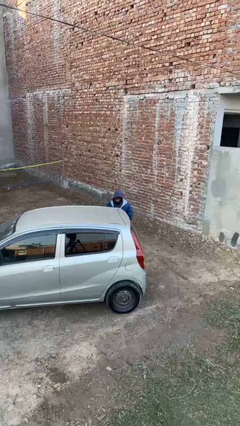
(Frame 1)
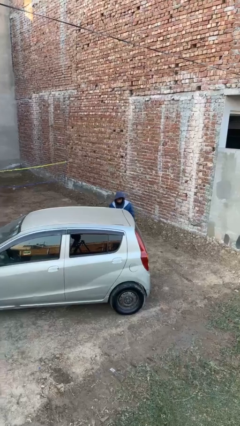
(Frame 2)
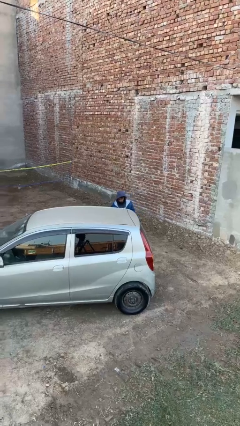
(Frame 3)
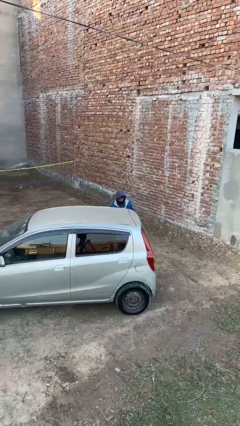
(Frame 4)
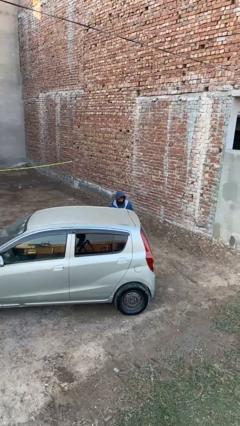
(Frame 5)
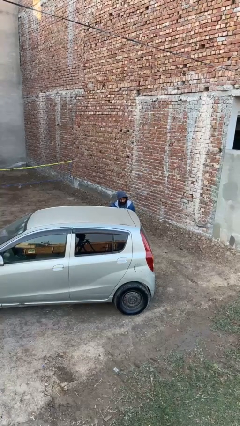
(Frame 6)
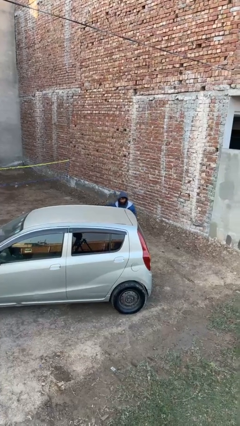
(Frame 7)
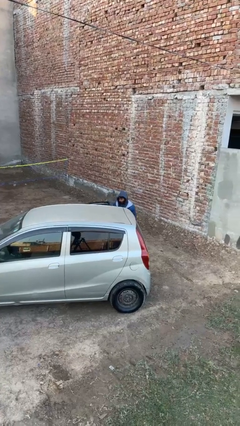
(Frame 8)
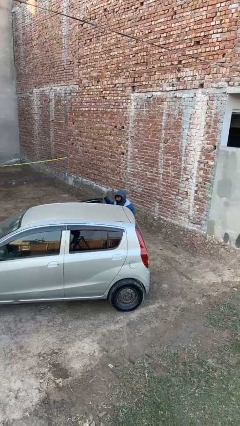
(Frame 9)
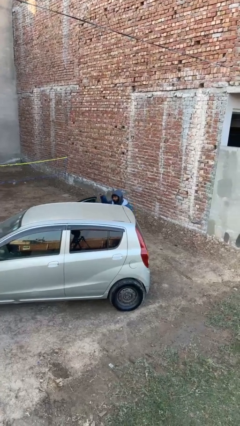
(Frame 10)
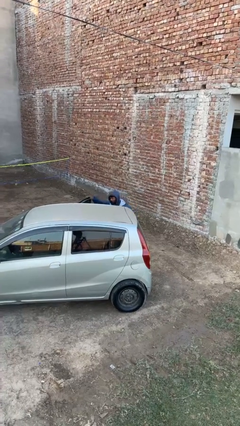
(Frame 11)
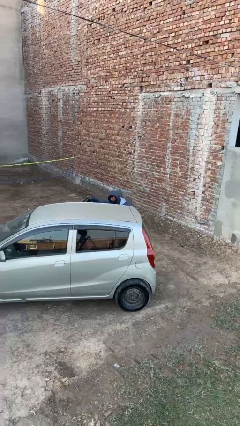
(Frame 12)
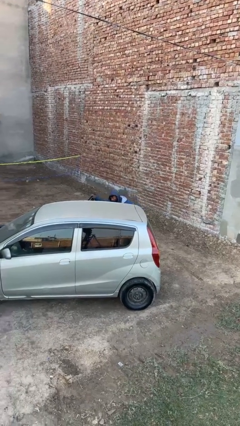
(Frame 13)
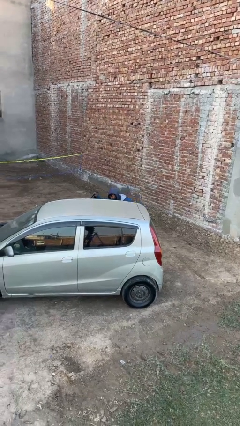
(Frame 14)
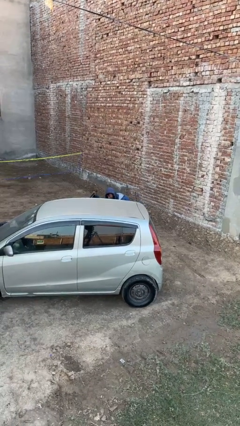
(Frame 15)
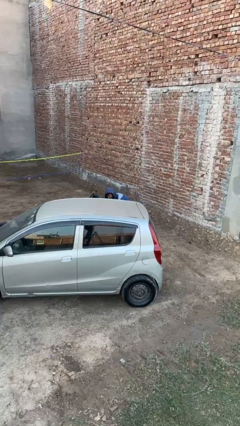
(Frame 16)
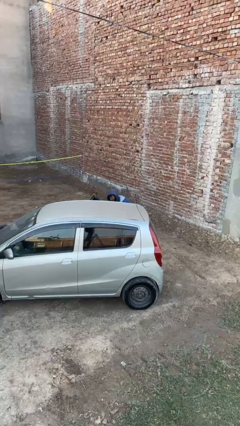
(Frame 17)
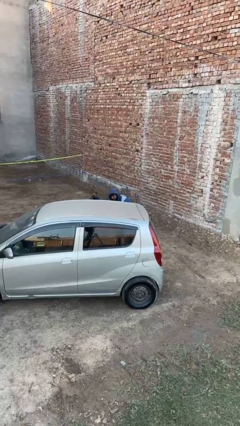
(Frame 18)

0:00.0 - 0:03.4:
person opens car door

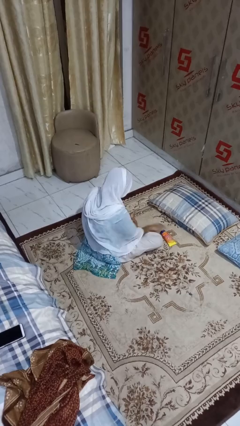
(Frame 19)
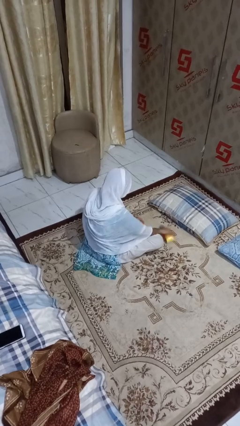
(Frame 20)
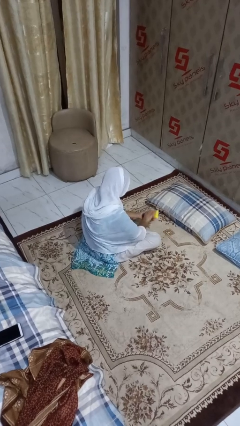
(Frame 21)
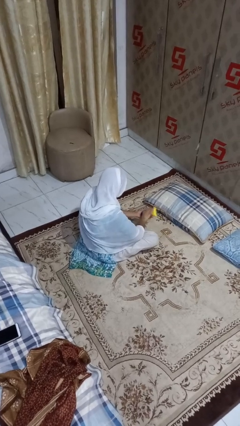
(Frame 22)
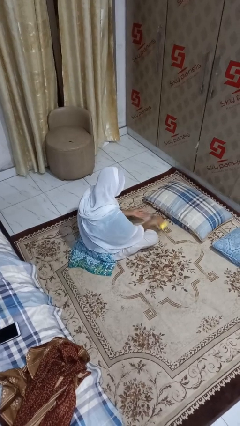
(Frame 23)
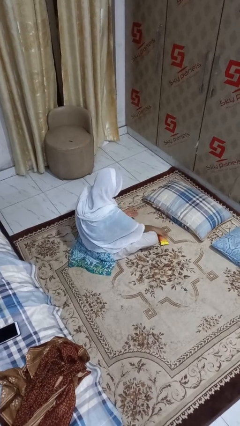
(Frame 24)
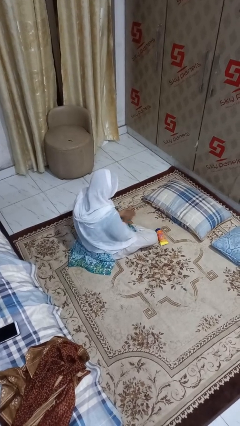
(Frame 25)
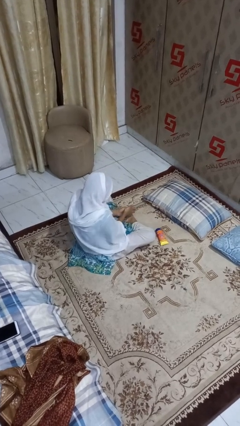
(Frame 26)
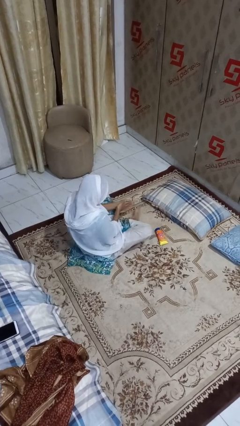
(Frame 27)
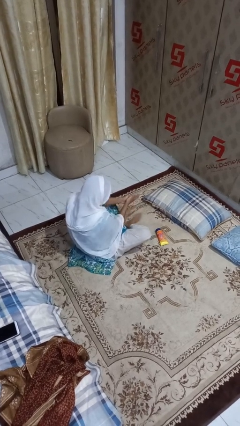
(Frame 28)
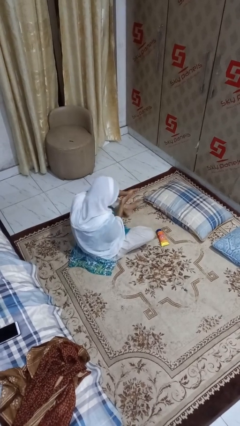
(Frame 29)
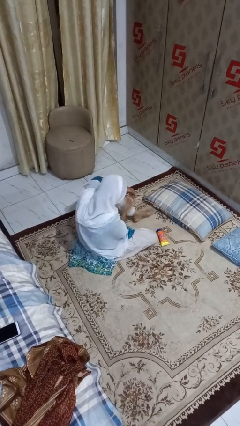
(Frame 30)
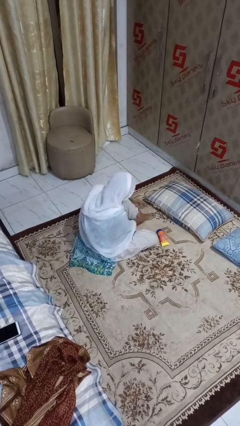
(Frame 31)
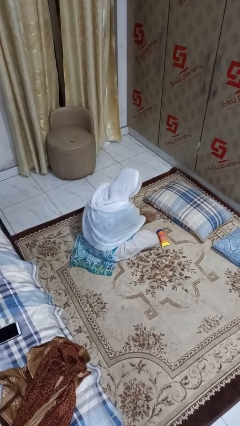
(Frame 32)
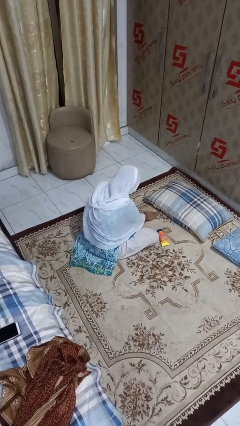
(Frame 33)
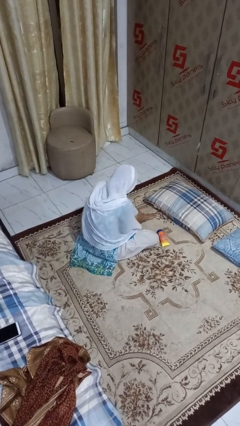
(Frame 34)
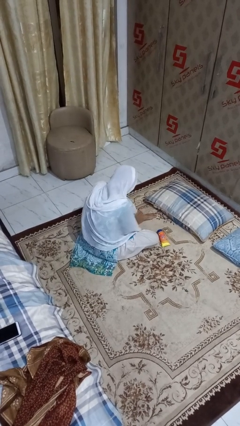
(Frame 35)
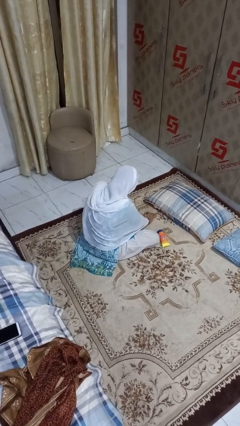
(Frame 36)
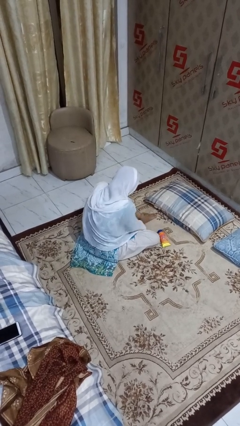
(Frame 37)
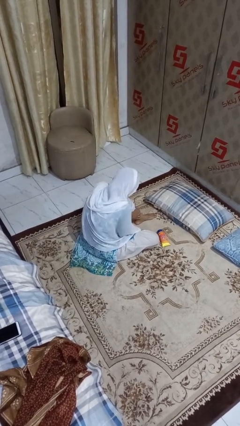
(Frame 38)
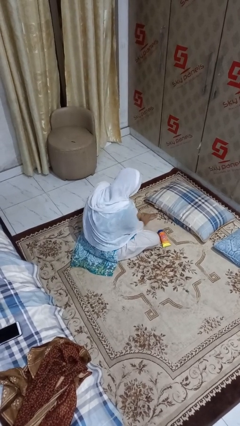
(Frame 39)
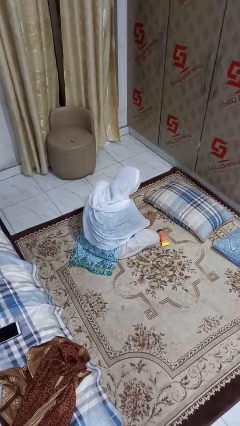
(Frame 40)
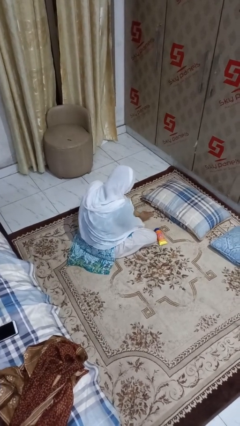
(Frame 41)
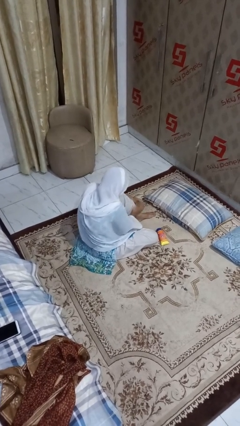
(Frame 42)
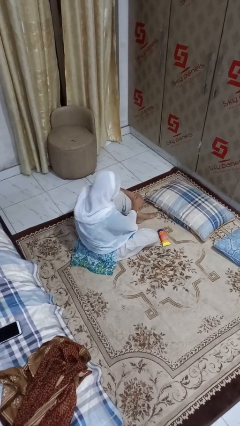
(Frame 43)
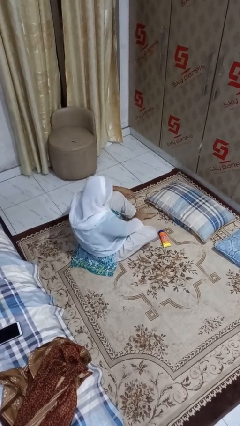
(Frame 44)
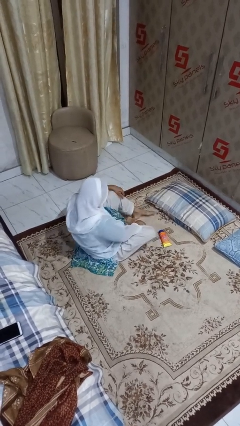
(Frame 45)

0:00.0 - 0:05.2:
person applies sunscreen

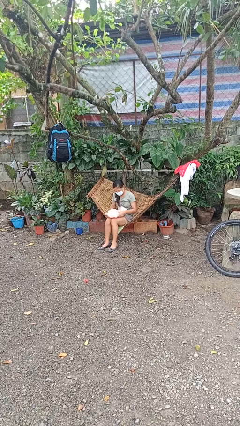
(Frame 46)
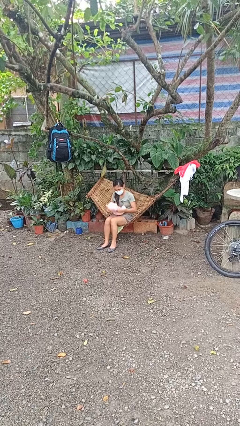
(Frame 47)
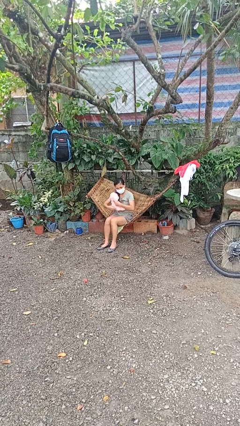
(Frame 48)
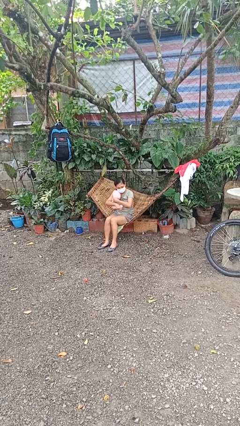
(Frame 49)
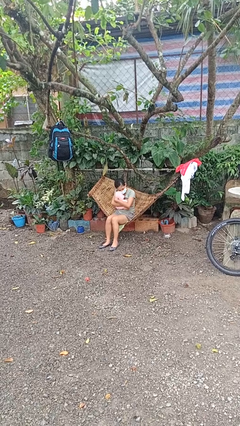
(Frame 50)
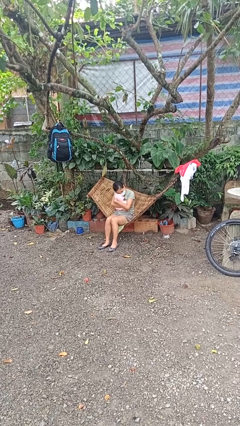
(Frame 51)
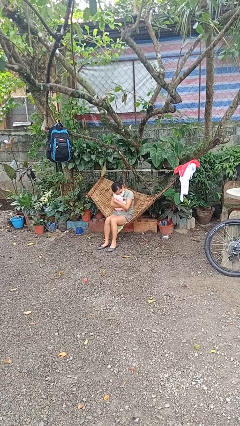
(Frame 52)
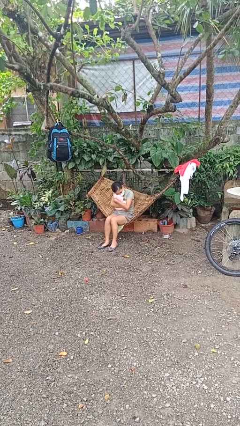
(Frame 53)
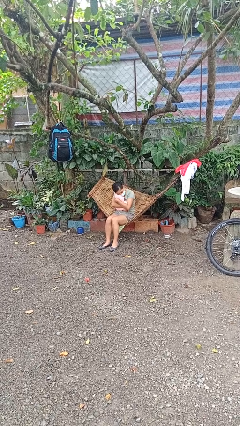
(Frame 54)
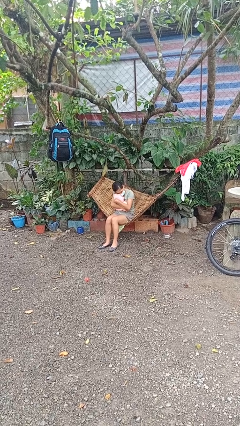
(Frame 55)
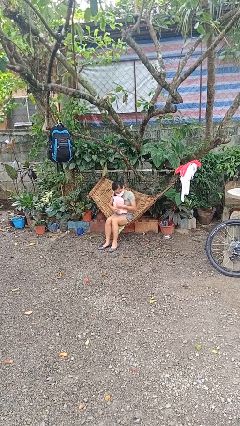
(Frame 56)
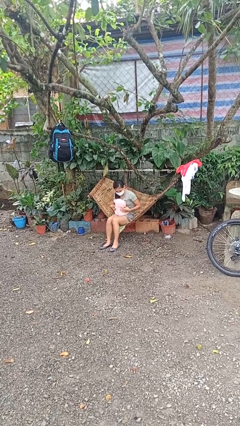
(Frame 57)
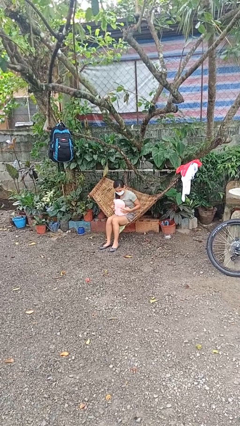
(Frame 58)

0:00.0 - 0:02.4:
person hugs stuffed animal

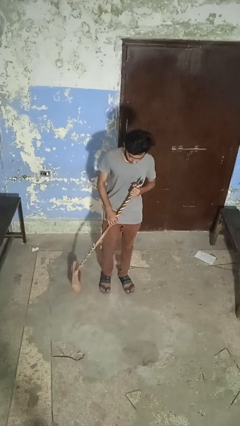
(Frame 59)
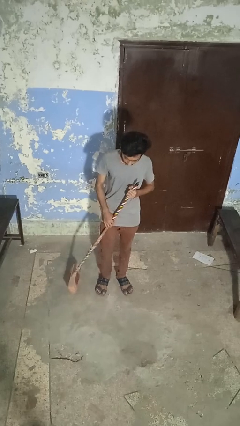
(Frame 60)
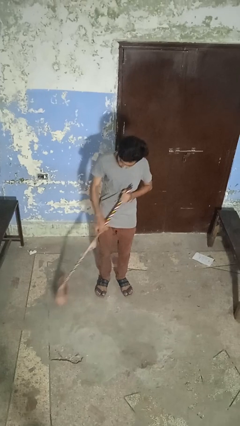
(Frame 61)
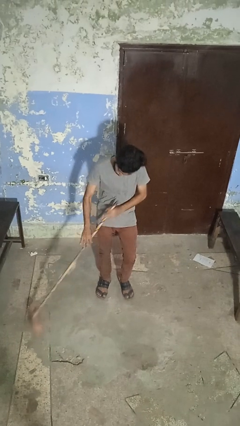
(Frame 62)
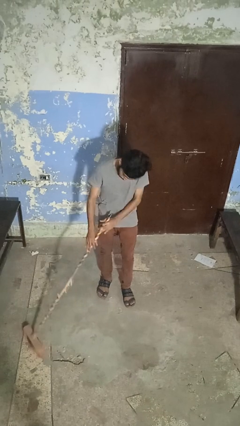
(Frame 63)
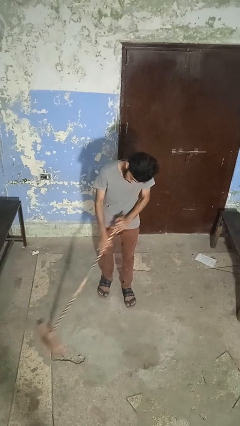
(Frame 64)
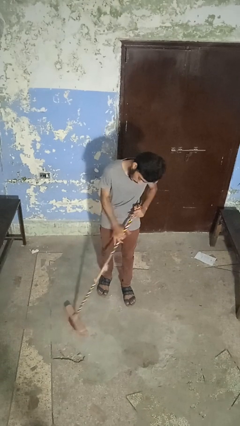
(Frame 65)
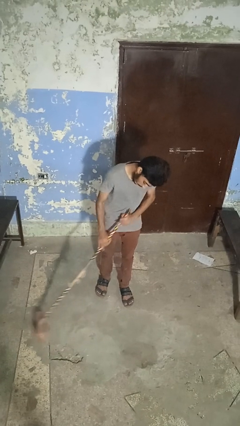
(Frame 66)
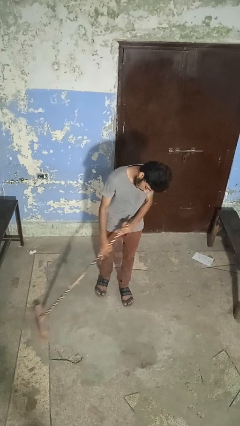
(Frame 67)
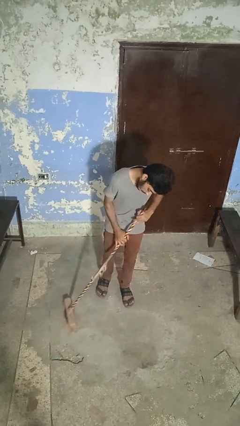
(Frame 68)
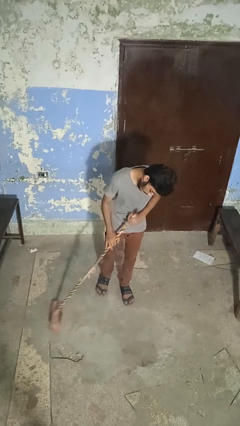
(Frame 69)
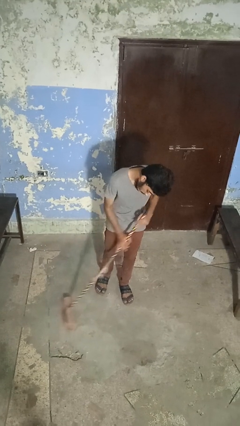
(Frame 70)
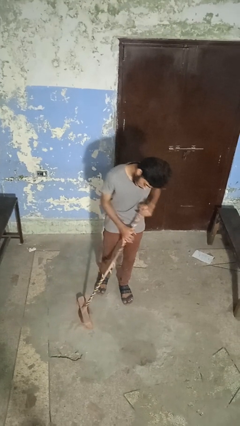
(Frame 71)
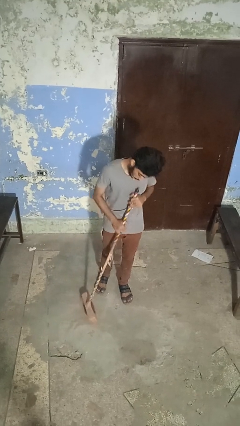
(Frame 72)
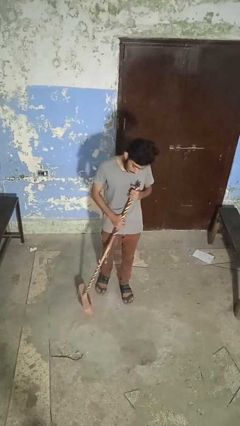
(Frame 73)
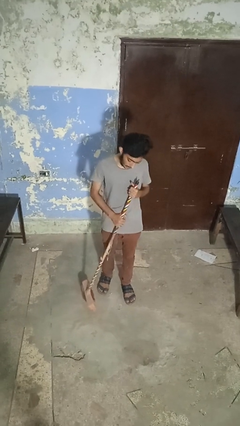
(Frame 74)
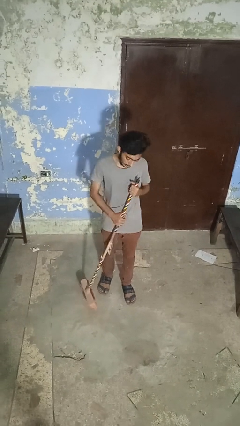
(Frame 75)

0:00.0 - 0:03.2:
person sweeps floor

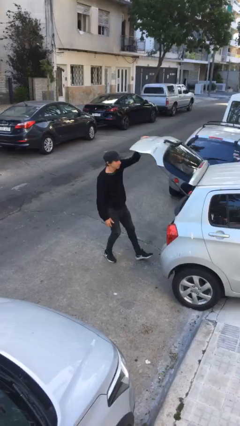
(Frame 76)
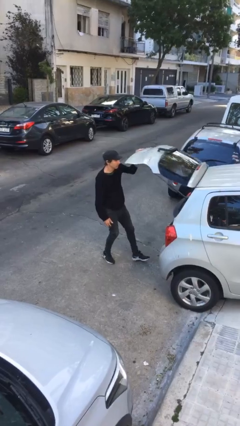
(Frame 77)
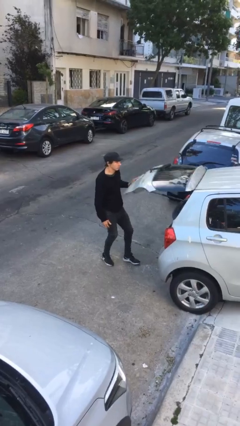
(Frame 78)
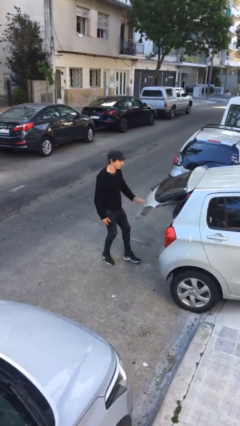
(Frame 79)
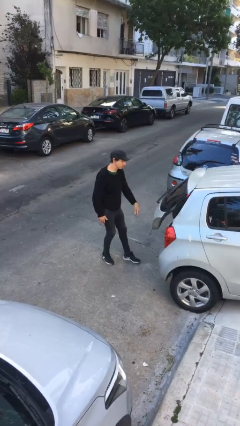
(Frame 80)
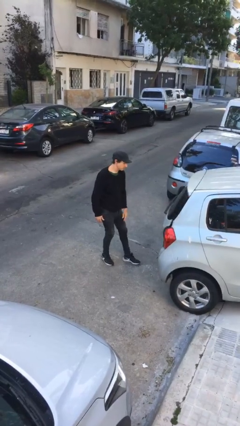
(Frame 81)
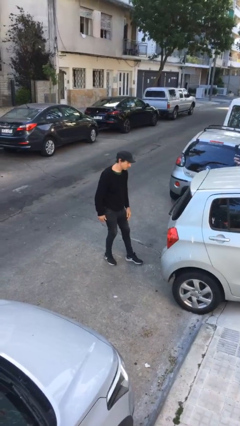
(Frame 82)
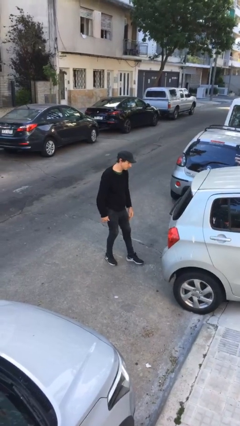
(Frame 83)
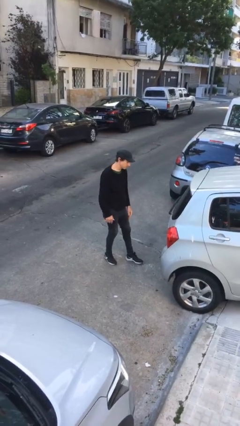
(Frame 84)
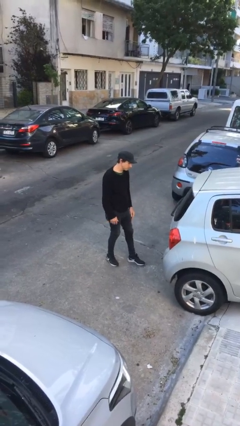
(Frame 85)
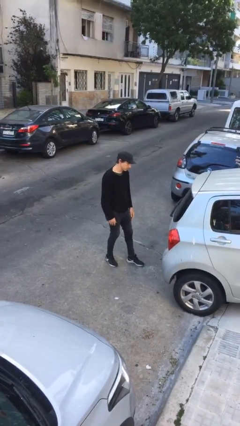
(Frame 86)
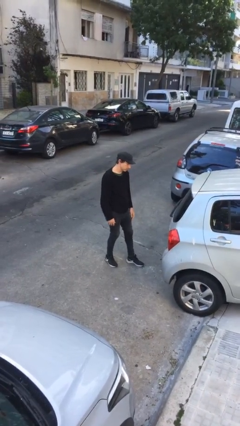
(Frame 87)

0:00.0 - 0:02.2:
person closes car trunk

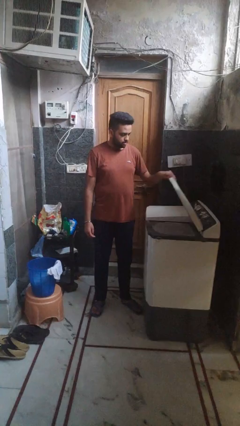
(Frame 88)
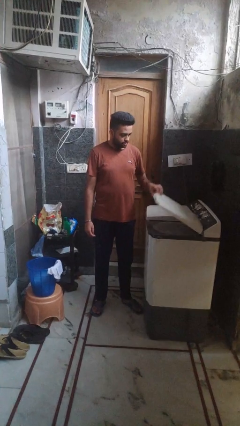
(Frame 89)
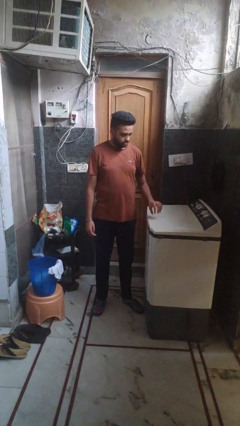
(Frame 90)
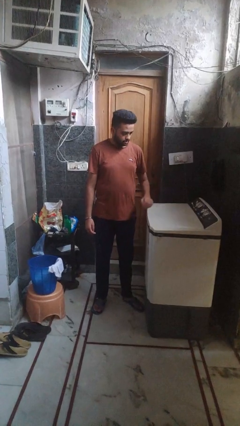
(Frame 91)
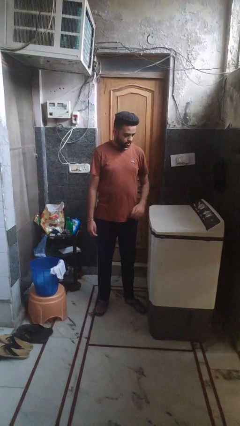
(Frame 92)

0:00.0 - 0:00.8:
person closes clothes washer

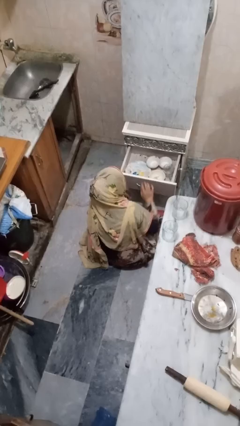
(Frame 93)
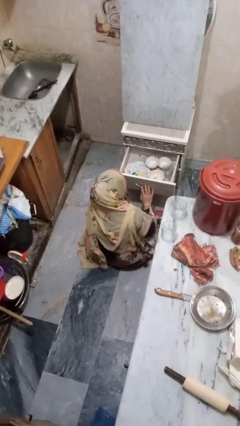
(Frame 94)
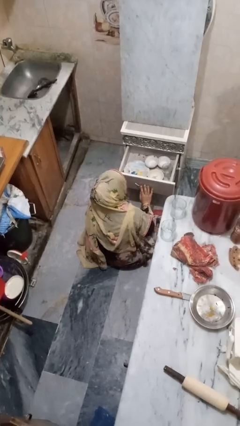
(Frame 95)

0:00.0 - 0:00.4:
person searches in kitchen drawer
